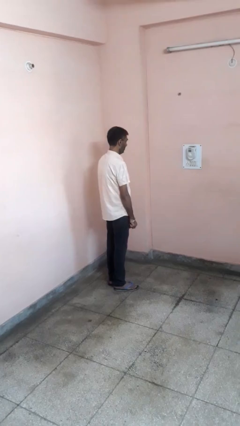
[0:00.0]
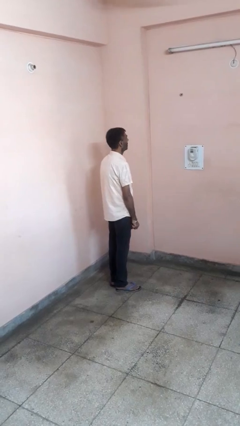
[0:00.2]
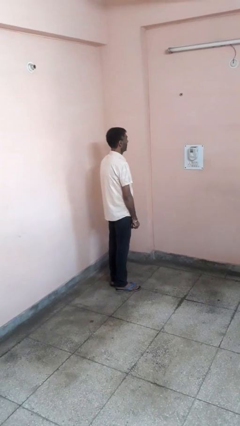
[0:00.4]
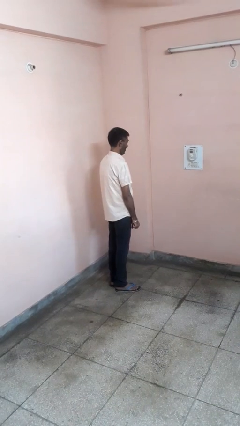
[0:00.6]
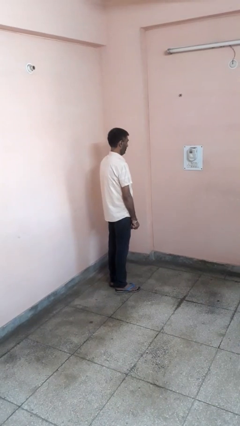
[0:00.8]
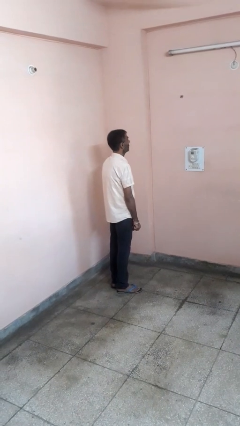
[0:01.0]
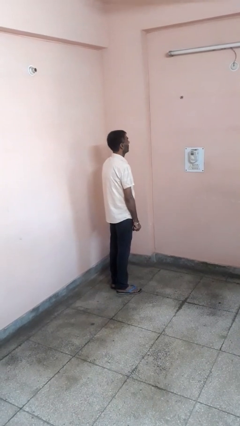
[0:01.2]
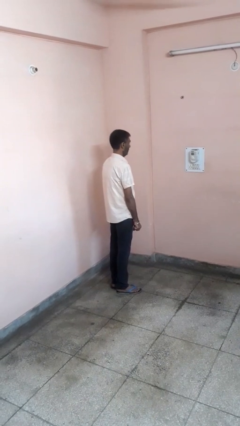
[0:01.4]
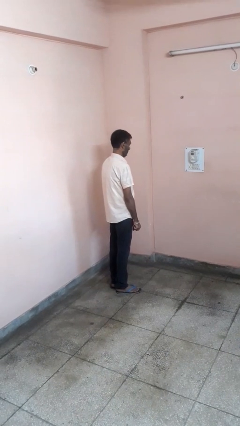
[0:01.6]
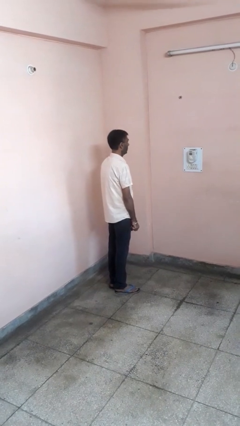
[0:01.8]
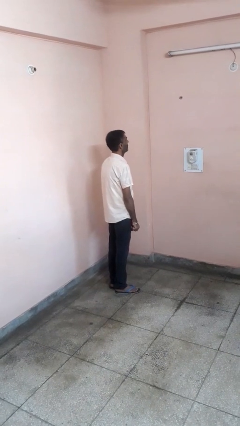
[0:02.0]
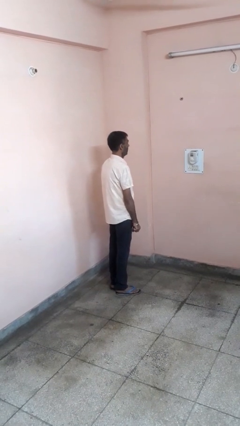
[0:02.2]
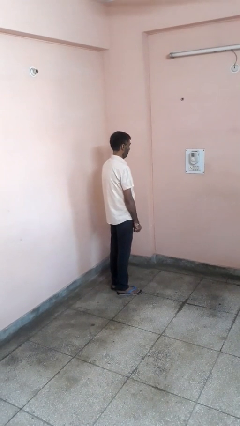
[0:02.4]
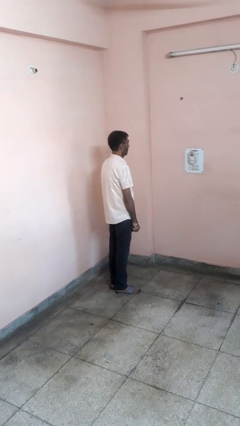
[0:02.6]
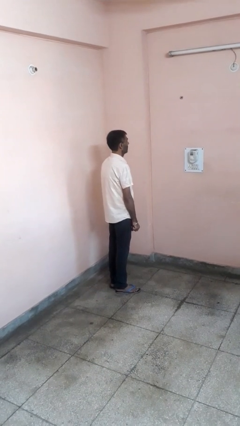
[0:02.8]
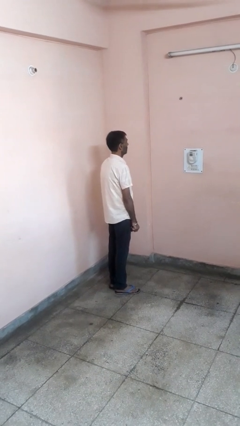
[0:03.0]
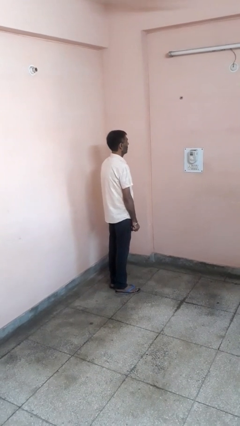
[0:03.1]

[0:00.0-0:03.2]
person nods head

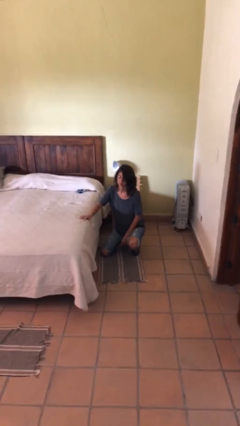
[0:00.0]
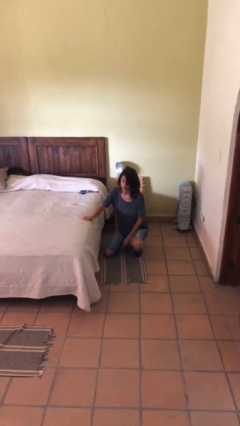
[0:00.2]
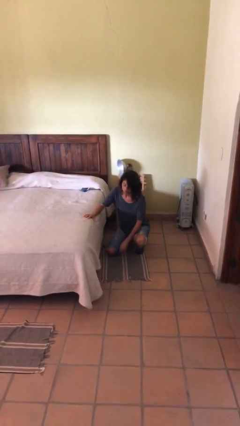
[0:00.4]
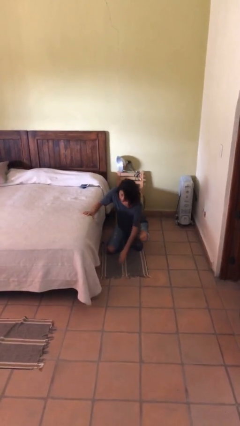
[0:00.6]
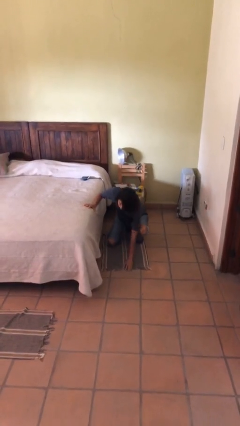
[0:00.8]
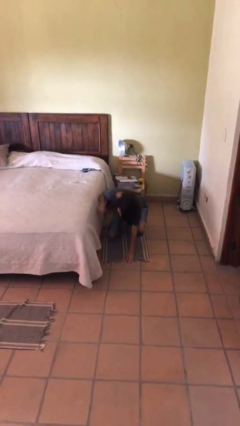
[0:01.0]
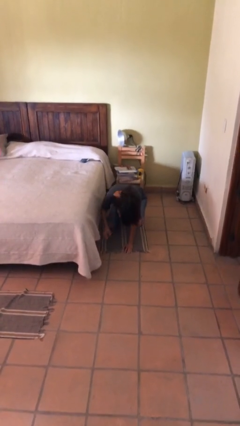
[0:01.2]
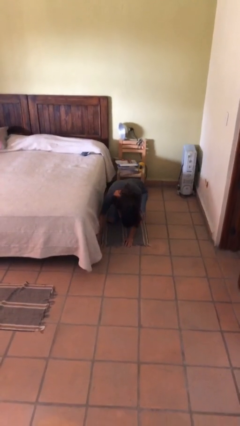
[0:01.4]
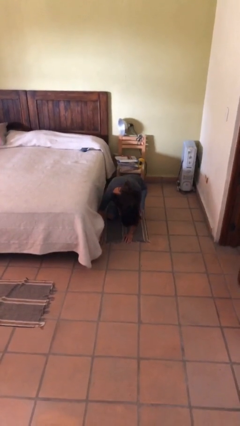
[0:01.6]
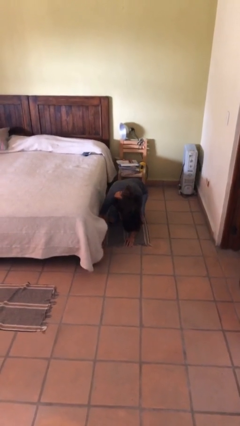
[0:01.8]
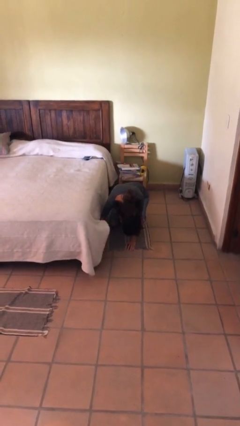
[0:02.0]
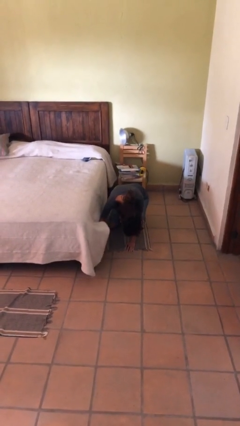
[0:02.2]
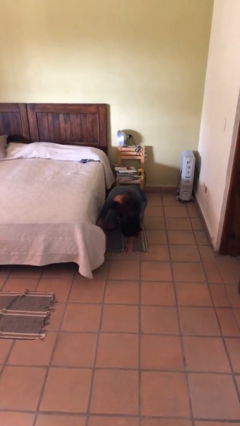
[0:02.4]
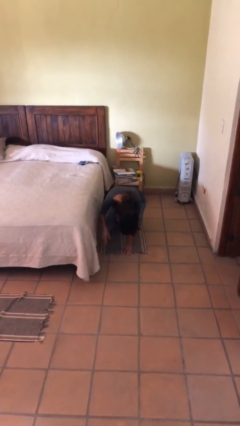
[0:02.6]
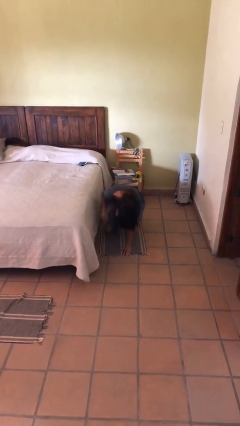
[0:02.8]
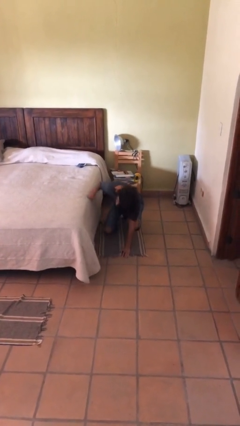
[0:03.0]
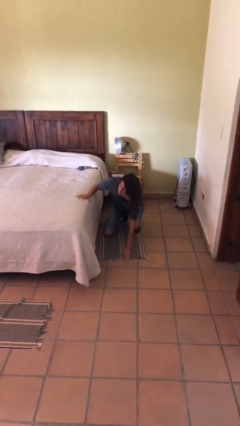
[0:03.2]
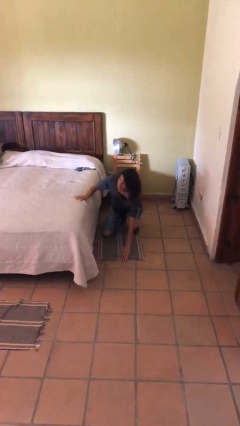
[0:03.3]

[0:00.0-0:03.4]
person searches under bed

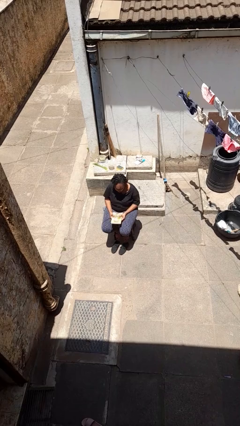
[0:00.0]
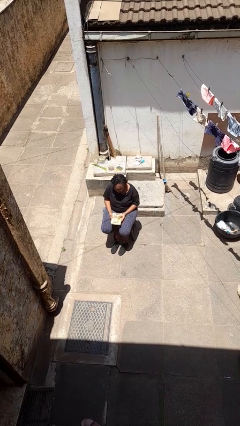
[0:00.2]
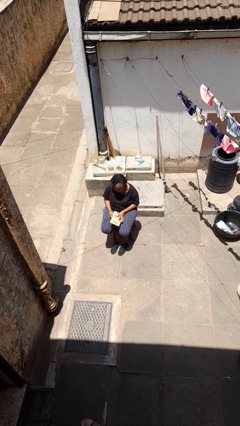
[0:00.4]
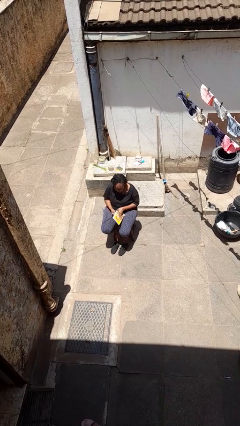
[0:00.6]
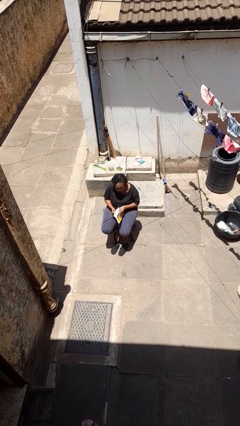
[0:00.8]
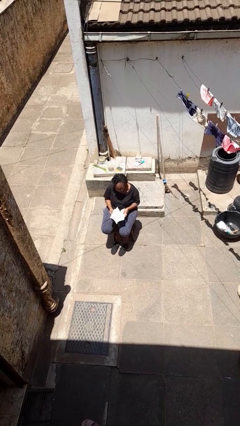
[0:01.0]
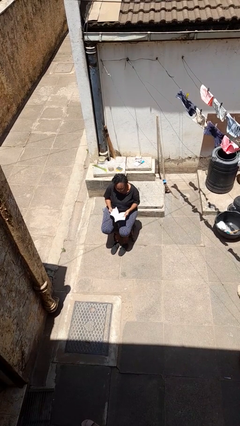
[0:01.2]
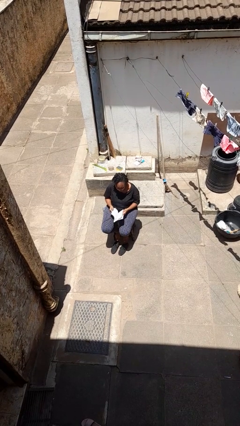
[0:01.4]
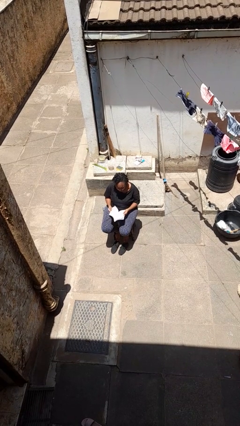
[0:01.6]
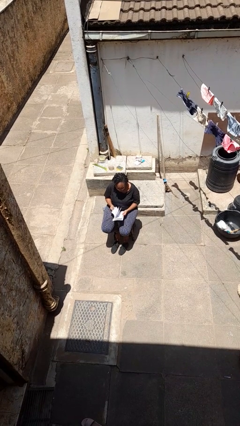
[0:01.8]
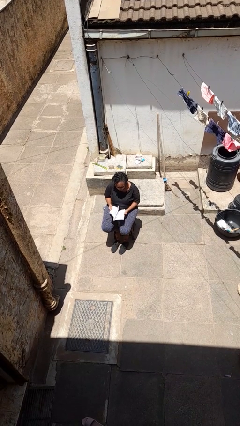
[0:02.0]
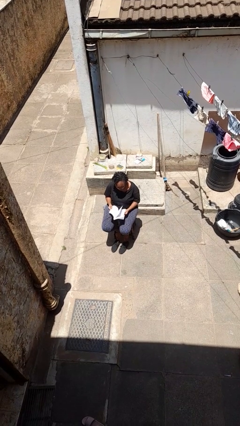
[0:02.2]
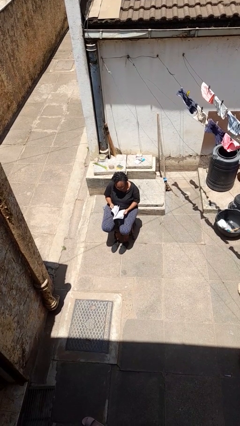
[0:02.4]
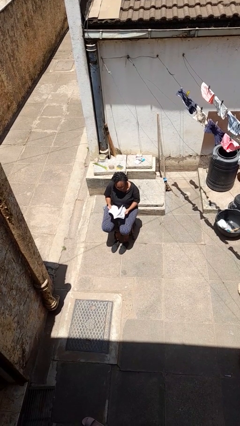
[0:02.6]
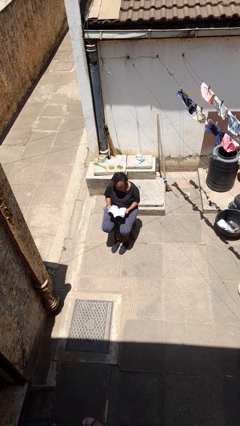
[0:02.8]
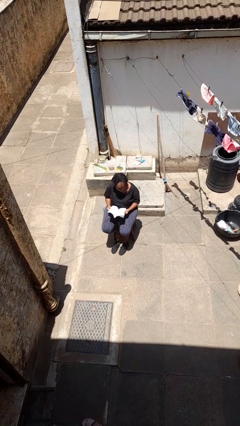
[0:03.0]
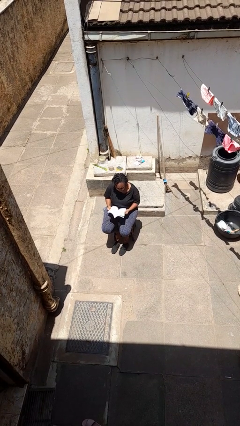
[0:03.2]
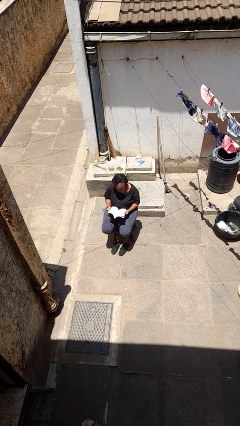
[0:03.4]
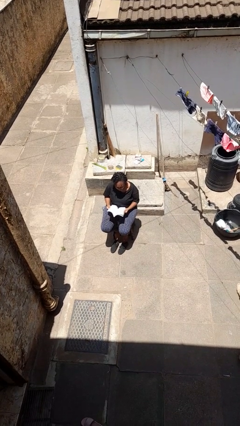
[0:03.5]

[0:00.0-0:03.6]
person reads book

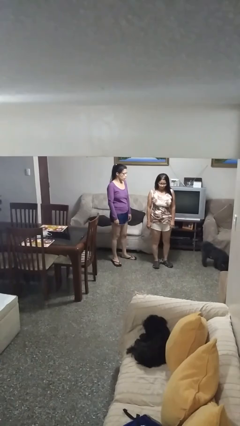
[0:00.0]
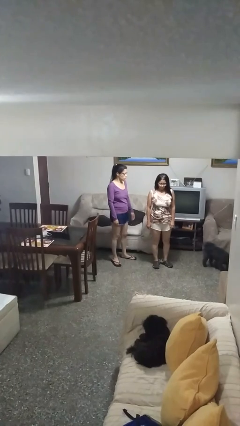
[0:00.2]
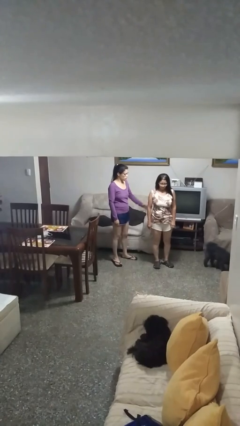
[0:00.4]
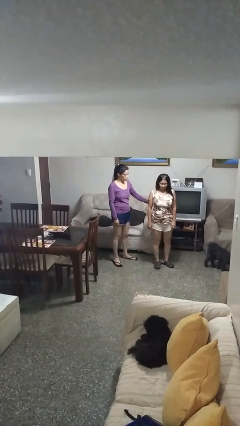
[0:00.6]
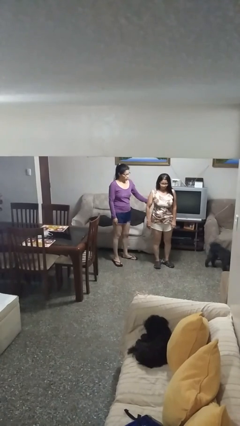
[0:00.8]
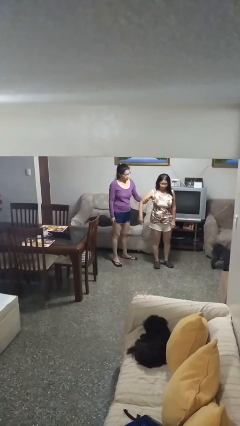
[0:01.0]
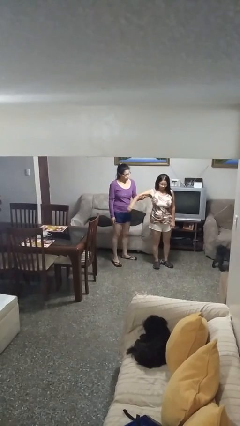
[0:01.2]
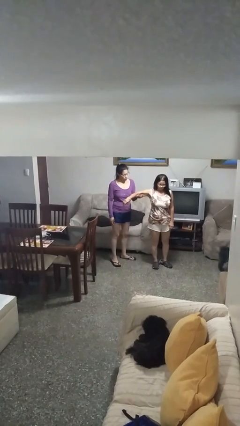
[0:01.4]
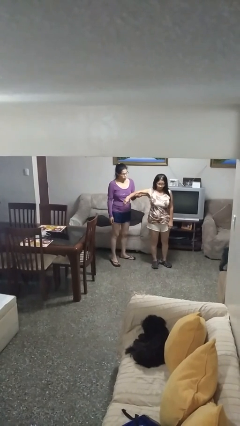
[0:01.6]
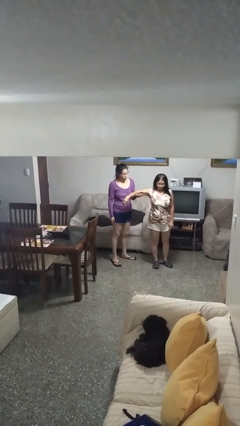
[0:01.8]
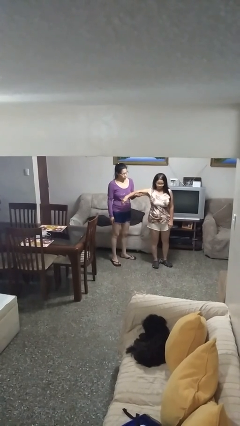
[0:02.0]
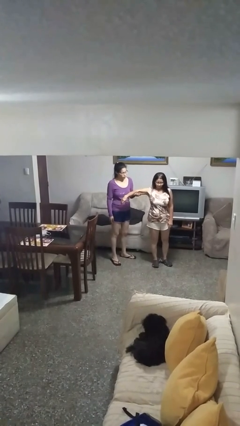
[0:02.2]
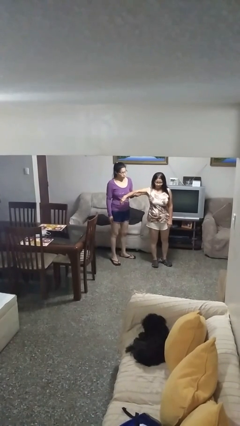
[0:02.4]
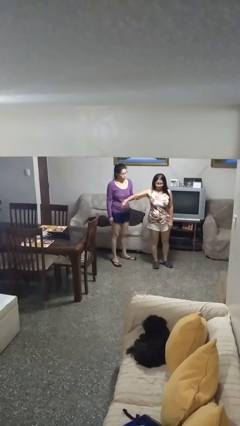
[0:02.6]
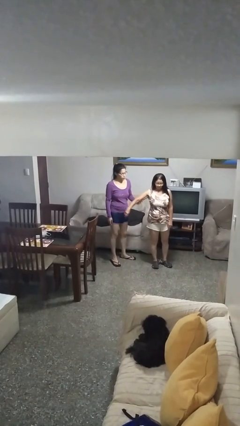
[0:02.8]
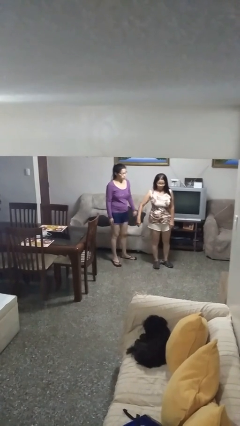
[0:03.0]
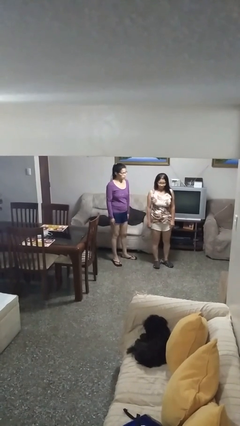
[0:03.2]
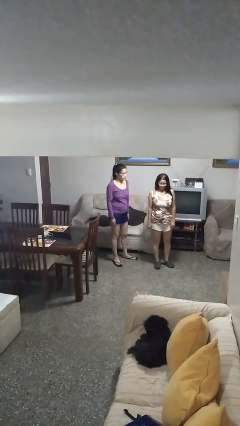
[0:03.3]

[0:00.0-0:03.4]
person grabs person by bicep

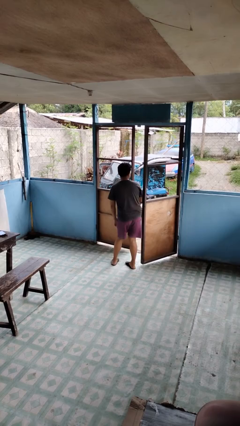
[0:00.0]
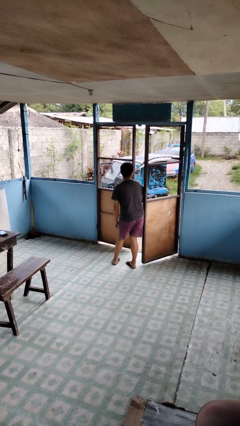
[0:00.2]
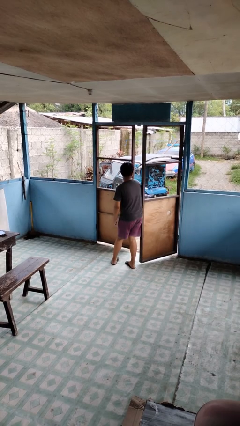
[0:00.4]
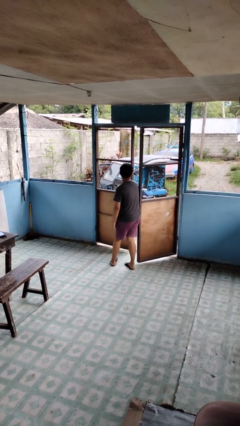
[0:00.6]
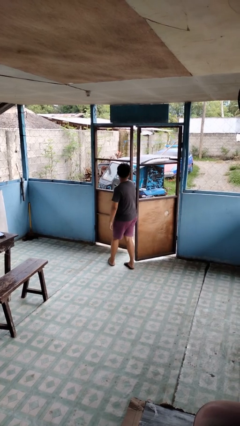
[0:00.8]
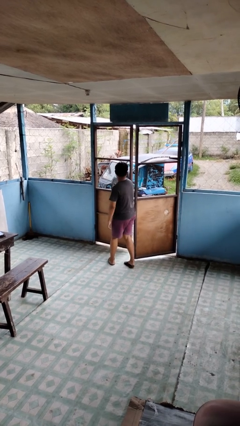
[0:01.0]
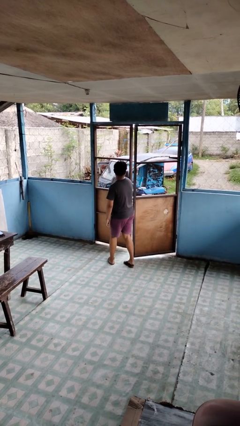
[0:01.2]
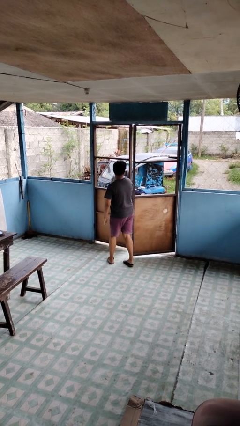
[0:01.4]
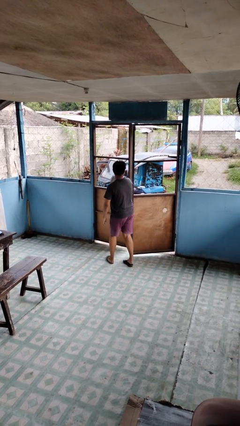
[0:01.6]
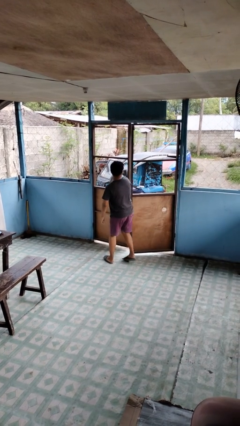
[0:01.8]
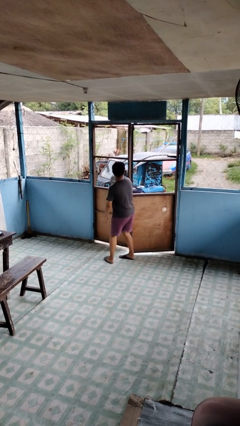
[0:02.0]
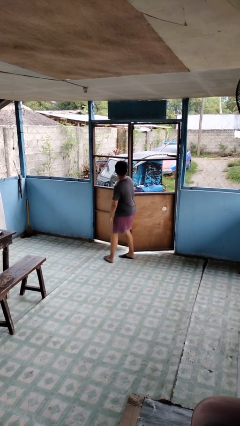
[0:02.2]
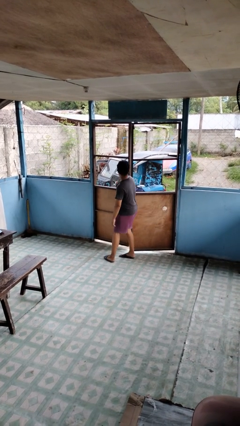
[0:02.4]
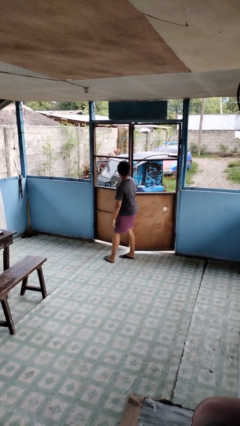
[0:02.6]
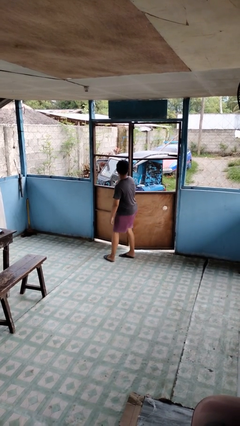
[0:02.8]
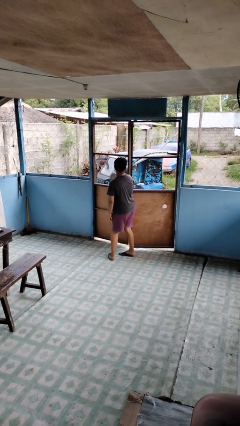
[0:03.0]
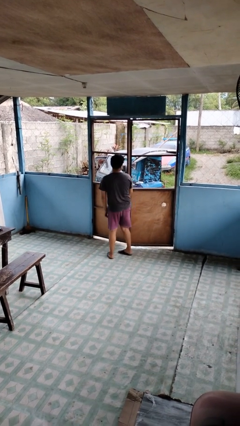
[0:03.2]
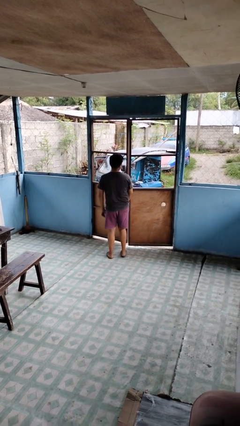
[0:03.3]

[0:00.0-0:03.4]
person closes door with hip

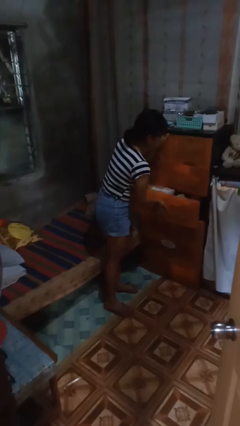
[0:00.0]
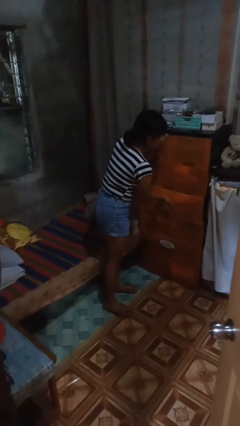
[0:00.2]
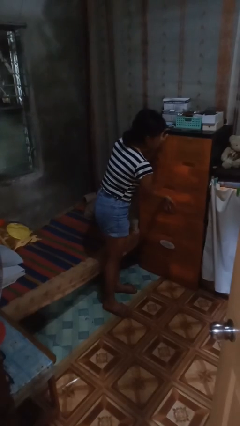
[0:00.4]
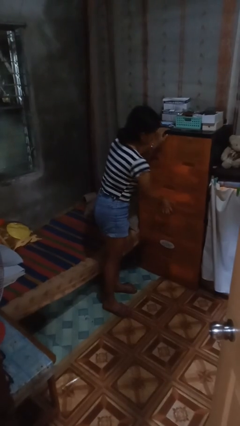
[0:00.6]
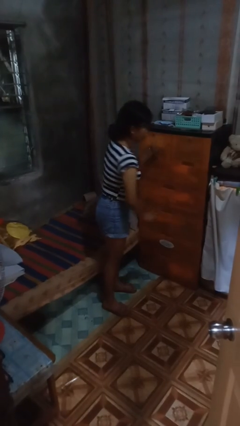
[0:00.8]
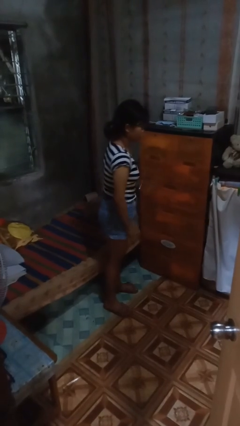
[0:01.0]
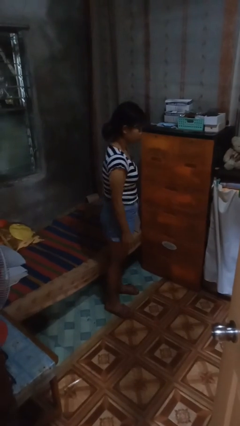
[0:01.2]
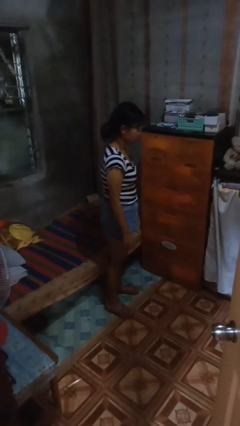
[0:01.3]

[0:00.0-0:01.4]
person closes dresser drawer
